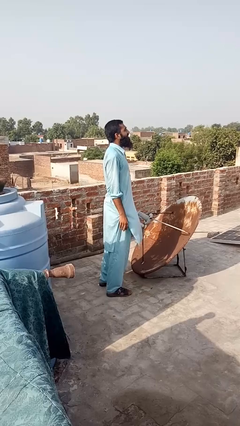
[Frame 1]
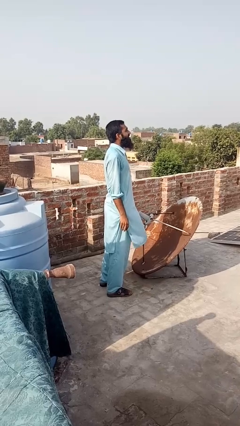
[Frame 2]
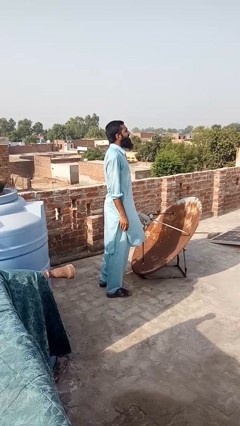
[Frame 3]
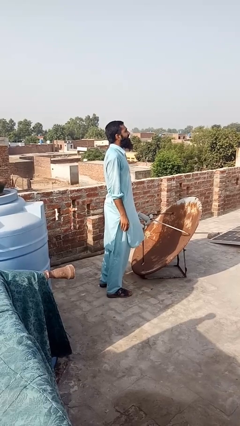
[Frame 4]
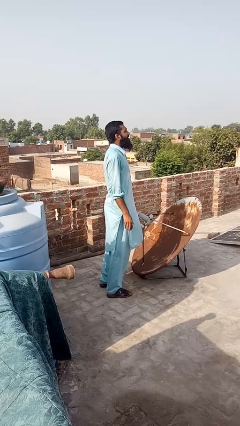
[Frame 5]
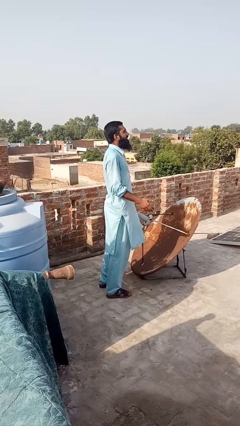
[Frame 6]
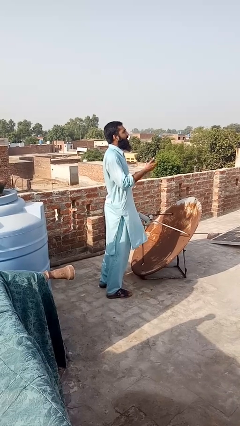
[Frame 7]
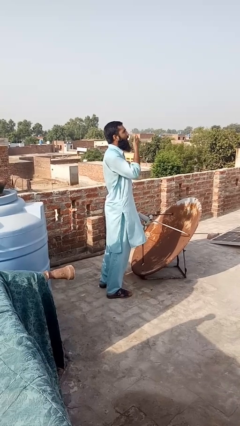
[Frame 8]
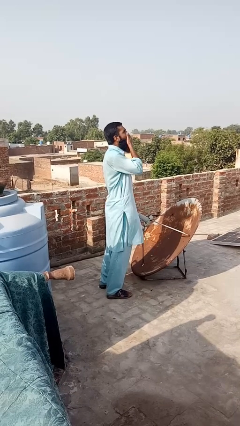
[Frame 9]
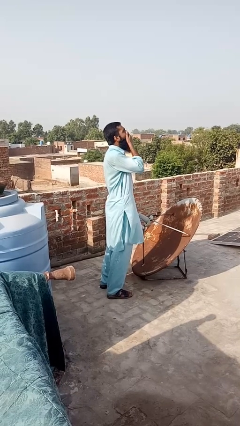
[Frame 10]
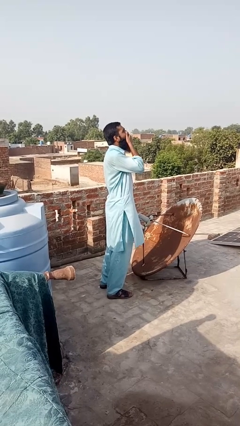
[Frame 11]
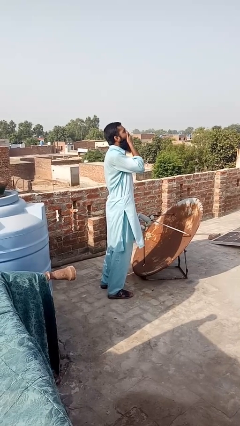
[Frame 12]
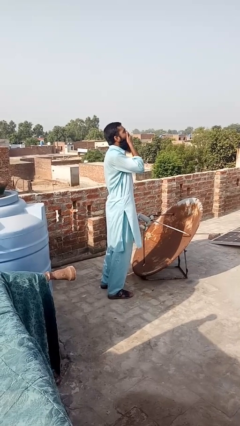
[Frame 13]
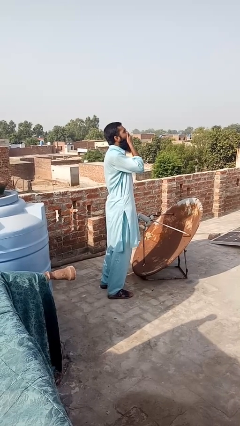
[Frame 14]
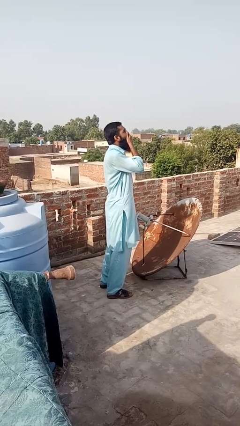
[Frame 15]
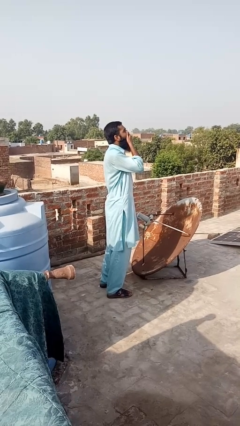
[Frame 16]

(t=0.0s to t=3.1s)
person covers face with hands

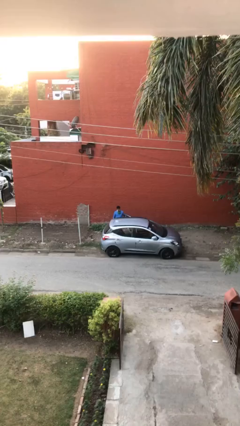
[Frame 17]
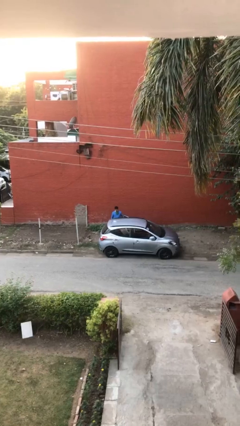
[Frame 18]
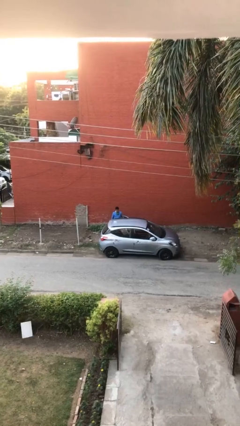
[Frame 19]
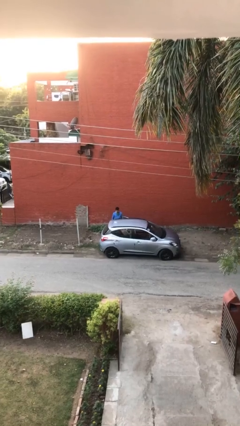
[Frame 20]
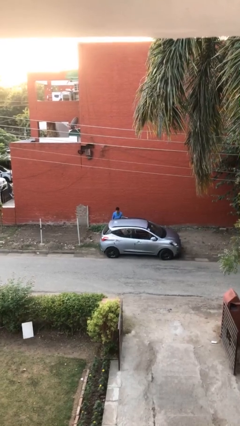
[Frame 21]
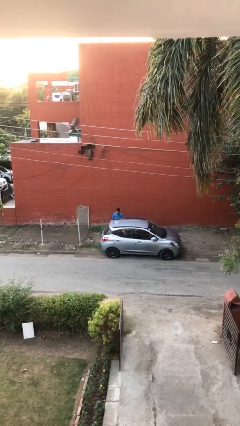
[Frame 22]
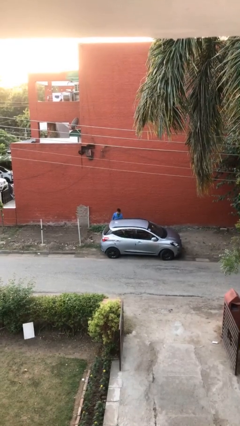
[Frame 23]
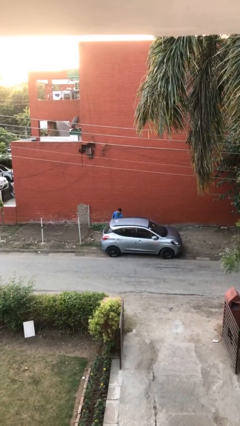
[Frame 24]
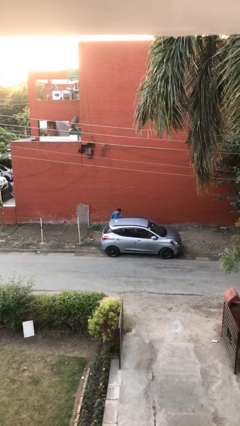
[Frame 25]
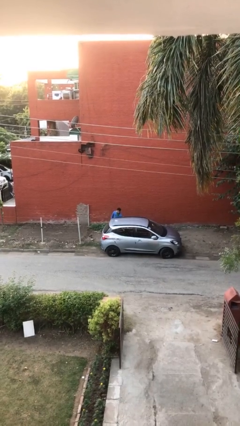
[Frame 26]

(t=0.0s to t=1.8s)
person closes car door

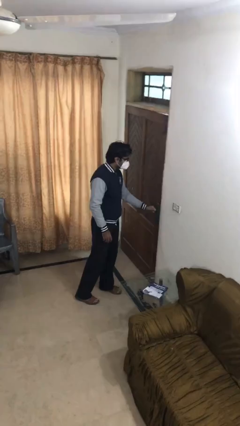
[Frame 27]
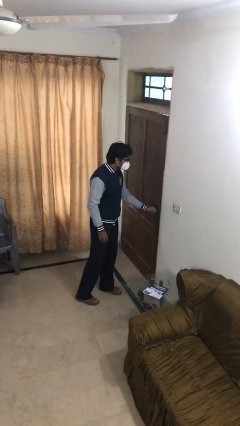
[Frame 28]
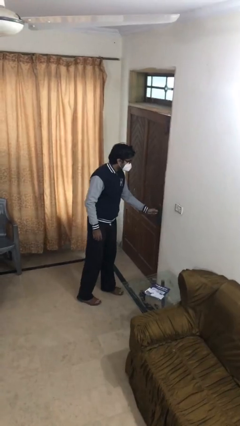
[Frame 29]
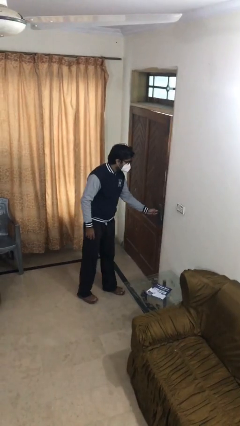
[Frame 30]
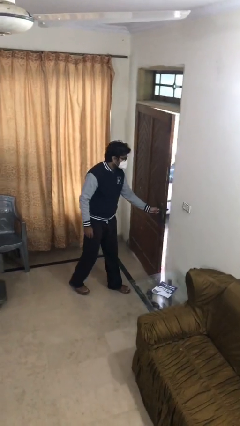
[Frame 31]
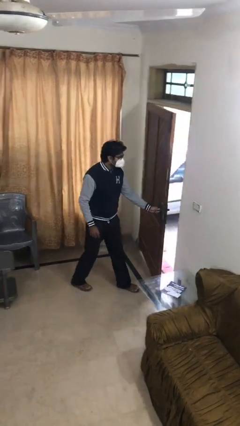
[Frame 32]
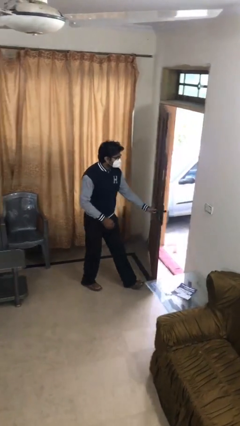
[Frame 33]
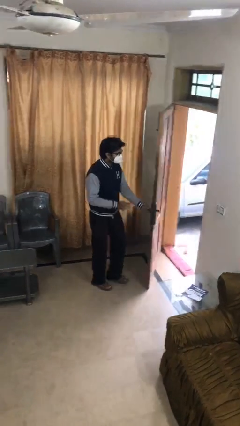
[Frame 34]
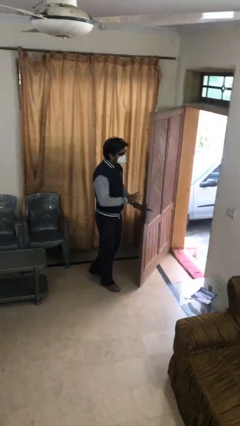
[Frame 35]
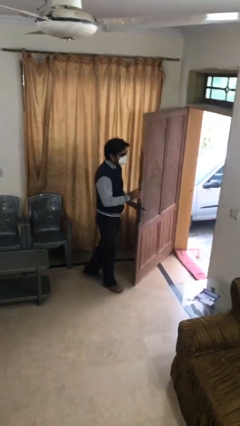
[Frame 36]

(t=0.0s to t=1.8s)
person opens facility door

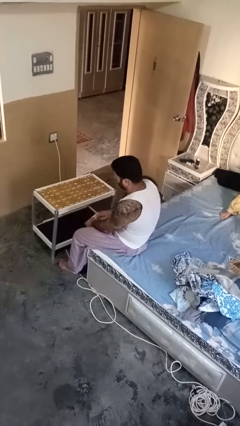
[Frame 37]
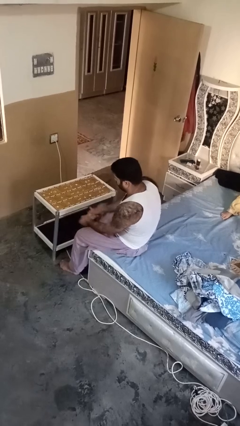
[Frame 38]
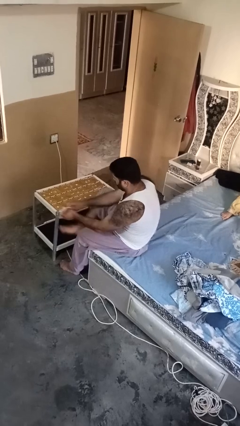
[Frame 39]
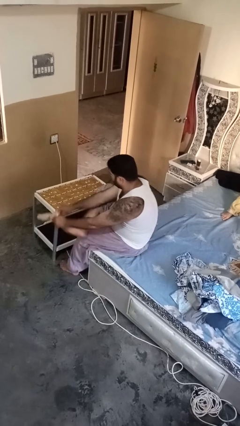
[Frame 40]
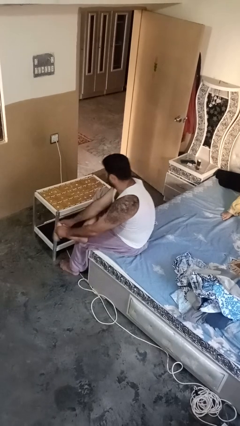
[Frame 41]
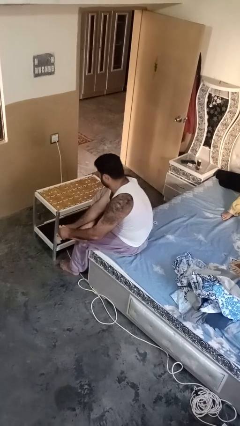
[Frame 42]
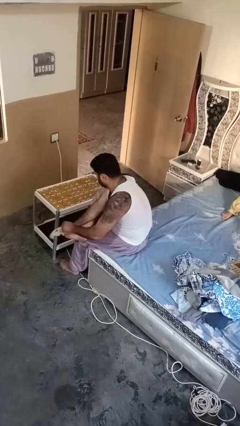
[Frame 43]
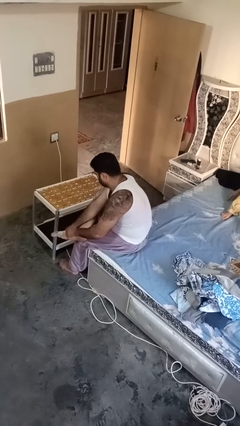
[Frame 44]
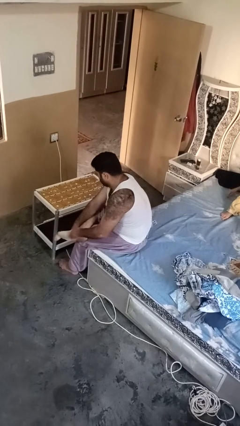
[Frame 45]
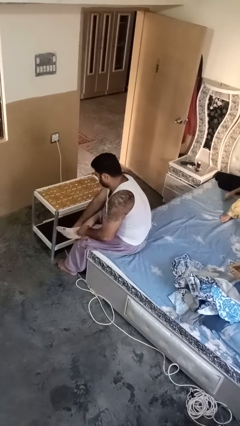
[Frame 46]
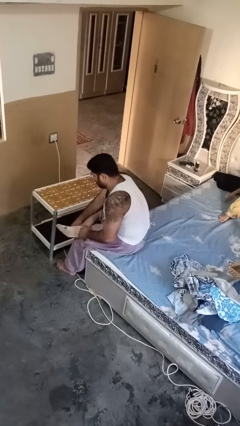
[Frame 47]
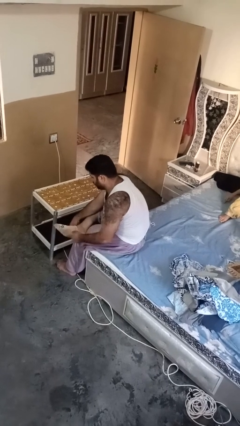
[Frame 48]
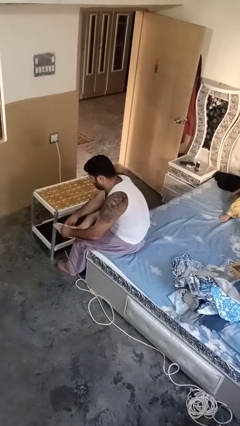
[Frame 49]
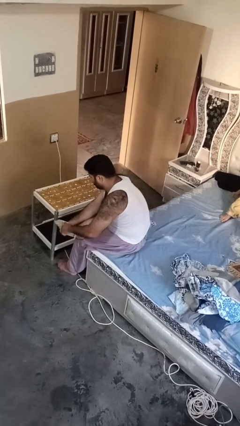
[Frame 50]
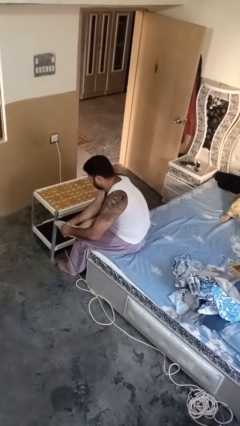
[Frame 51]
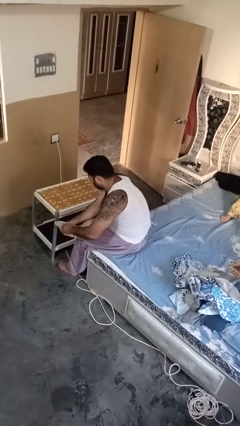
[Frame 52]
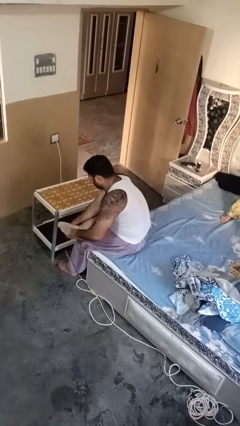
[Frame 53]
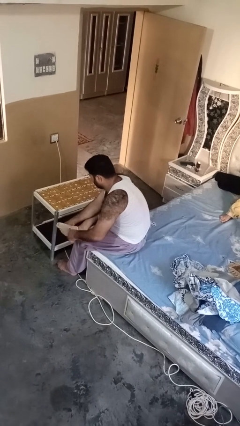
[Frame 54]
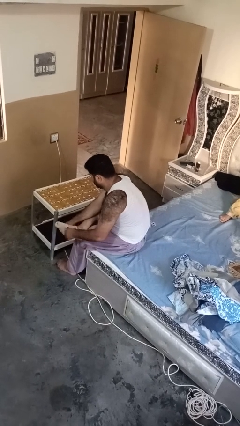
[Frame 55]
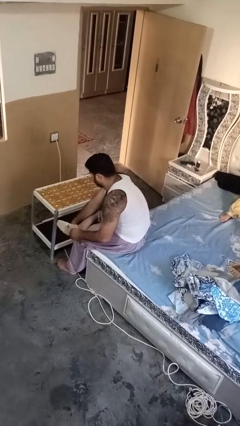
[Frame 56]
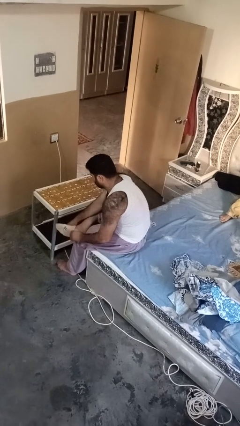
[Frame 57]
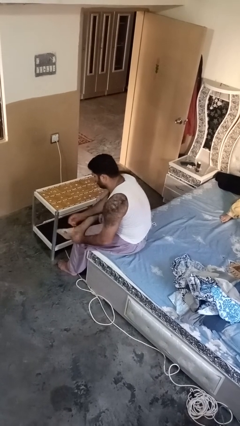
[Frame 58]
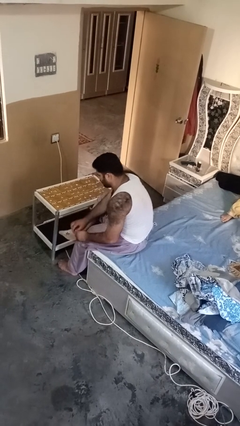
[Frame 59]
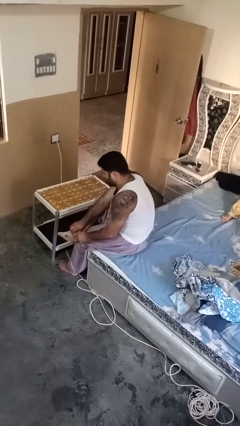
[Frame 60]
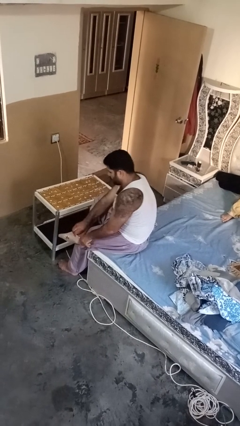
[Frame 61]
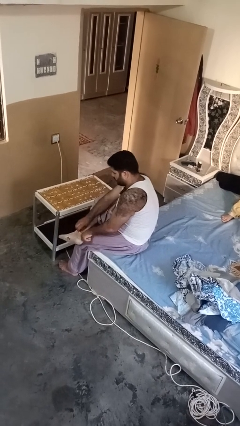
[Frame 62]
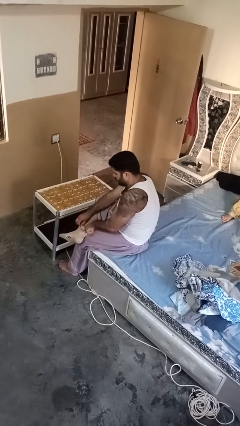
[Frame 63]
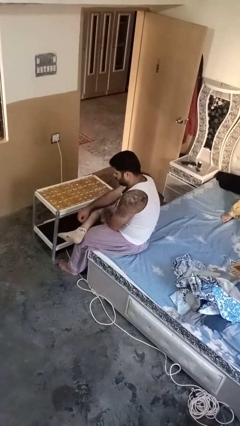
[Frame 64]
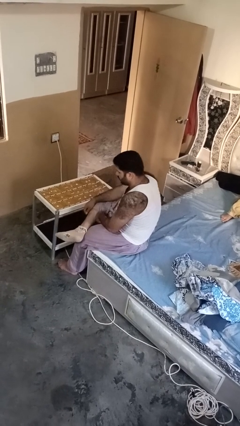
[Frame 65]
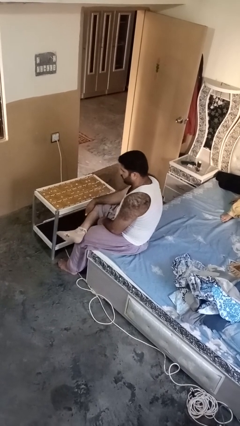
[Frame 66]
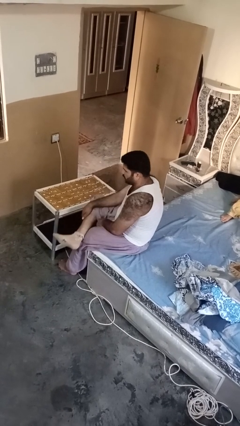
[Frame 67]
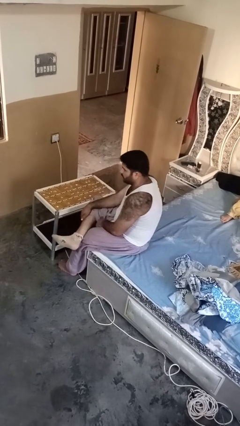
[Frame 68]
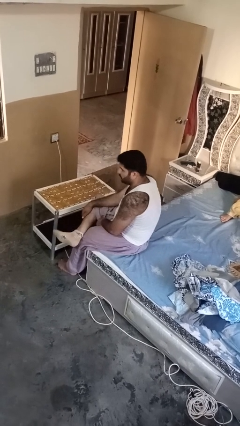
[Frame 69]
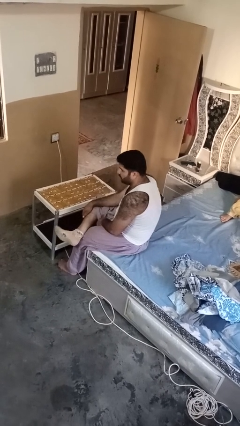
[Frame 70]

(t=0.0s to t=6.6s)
person puts on socks

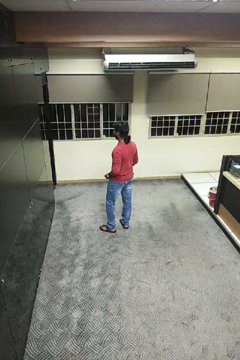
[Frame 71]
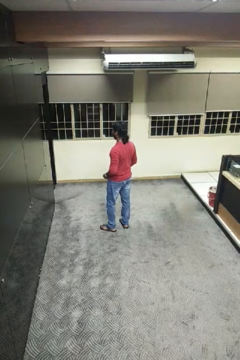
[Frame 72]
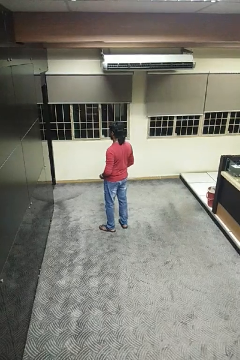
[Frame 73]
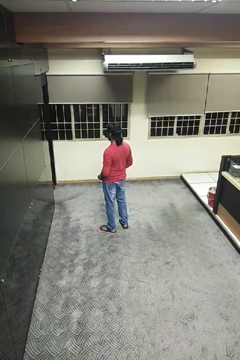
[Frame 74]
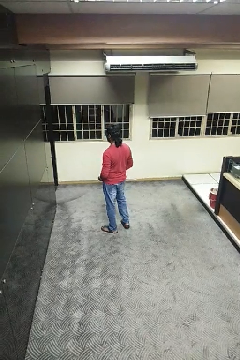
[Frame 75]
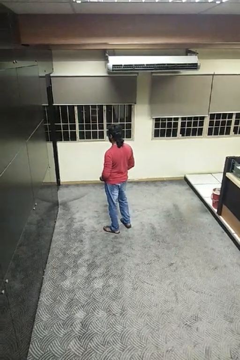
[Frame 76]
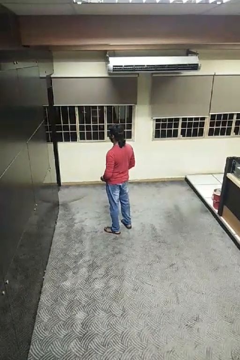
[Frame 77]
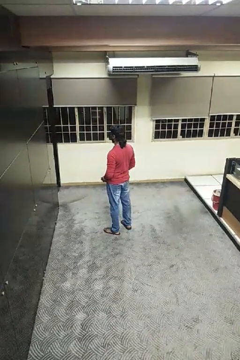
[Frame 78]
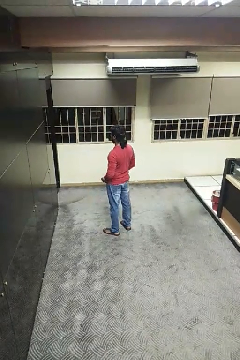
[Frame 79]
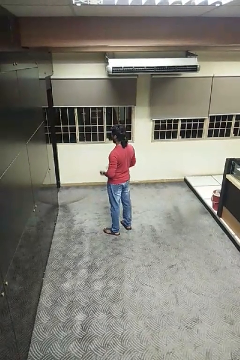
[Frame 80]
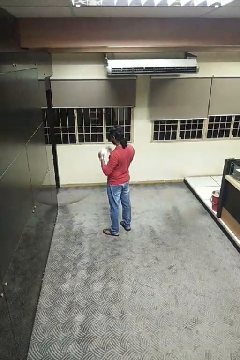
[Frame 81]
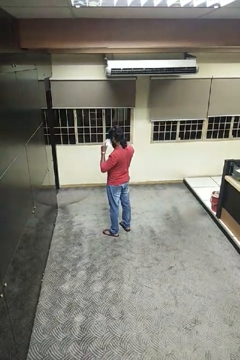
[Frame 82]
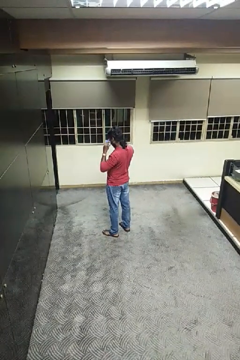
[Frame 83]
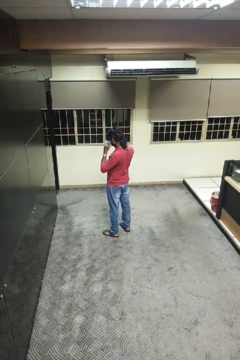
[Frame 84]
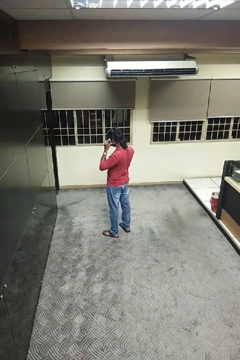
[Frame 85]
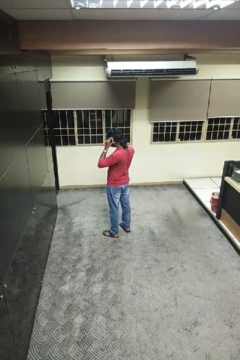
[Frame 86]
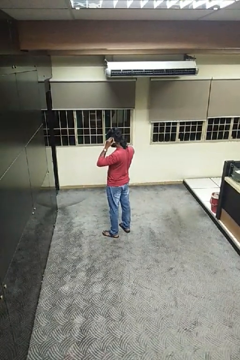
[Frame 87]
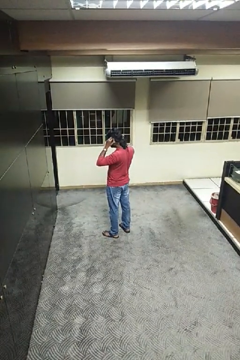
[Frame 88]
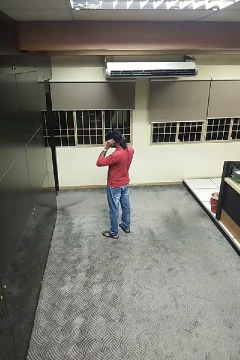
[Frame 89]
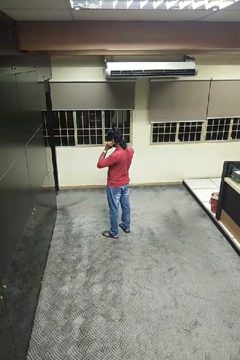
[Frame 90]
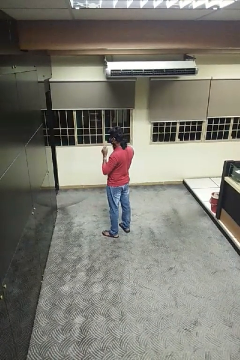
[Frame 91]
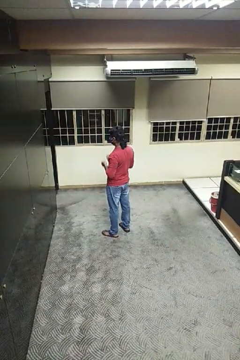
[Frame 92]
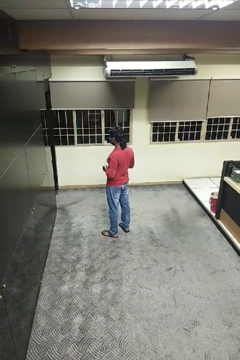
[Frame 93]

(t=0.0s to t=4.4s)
person puts on facemask

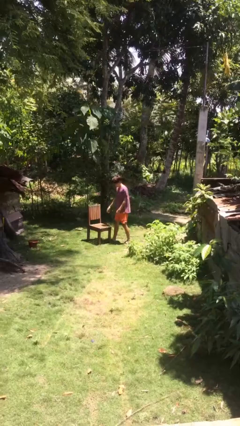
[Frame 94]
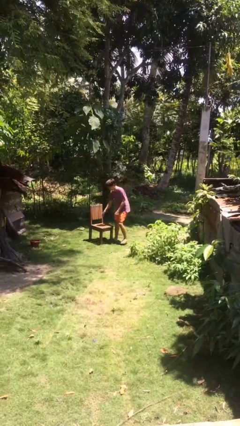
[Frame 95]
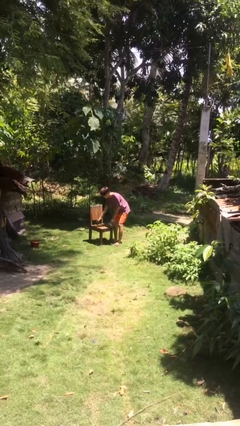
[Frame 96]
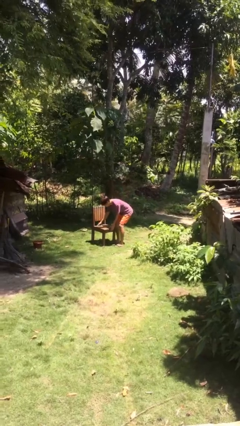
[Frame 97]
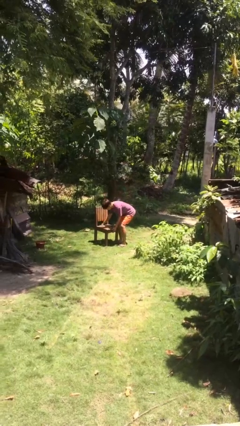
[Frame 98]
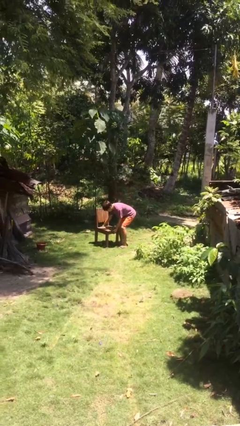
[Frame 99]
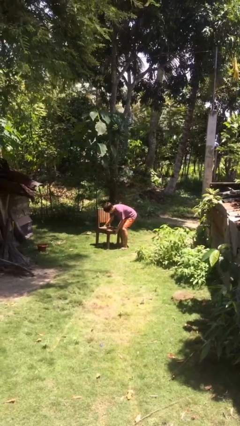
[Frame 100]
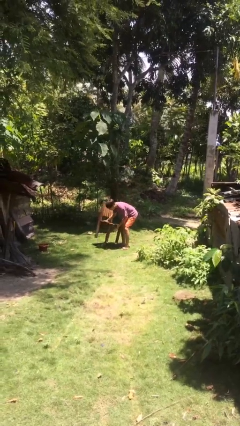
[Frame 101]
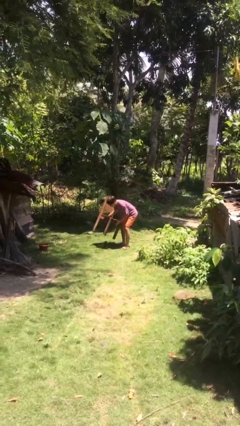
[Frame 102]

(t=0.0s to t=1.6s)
person picks up object from floor
